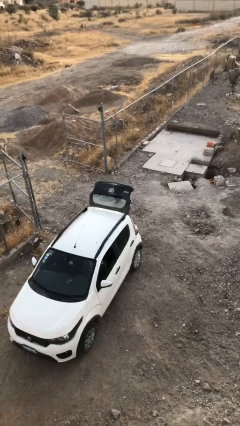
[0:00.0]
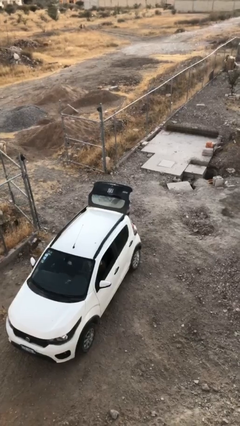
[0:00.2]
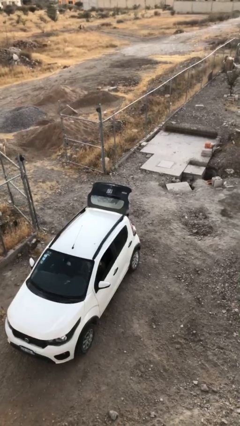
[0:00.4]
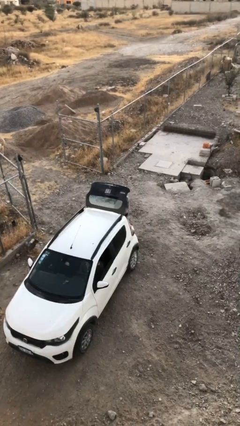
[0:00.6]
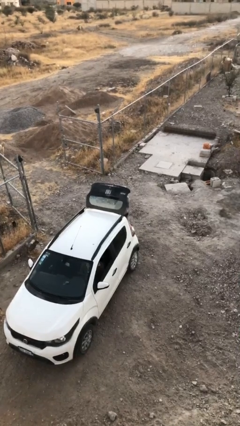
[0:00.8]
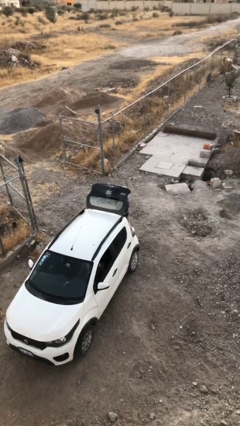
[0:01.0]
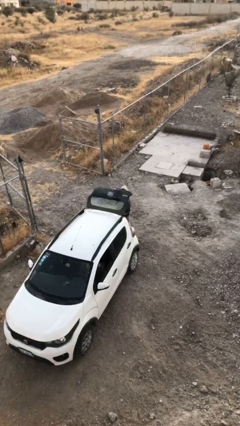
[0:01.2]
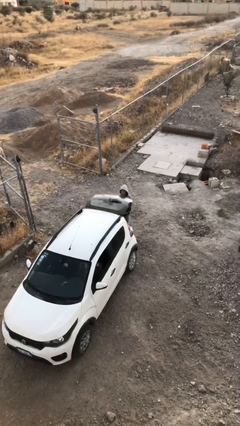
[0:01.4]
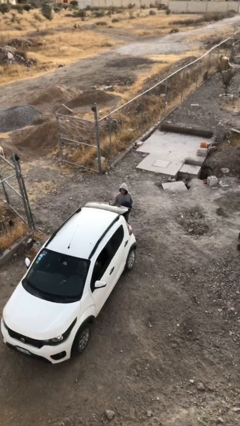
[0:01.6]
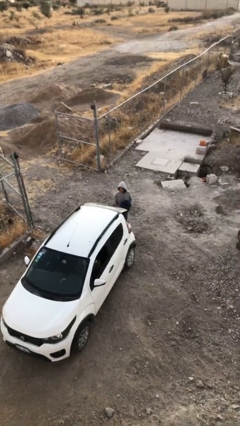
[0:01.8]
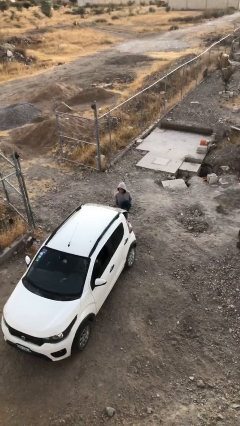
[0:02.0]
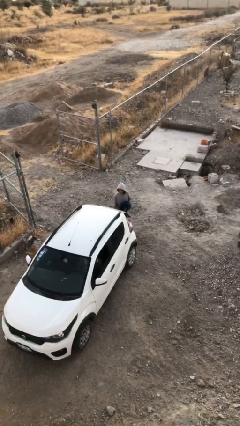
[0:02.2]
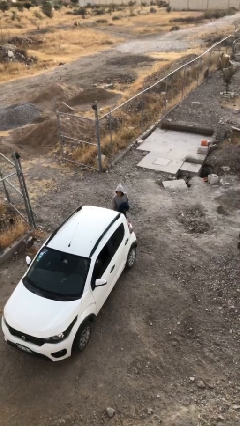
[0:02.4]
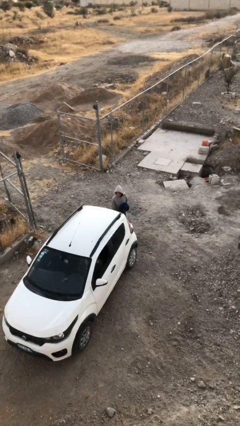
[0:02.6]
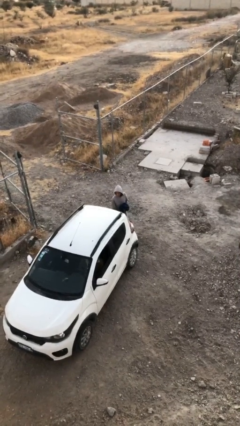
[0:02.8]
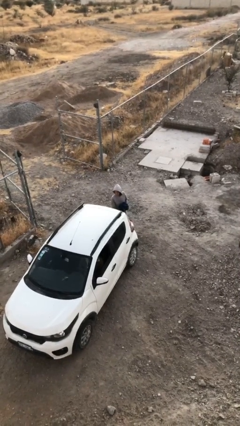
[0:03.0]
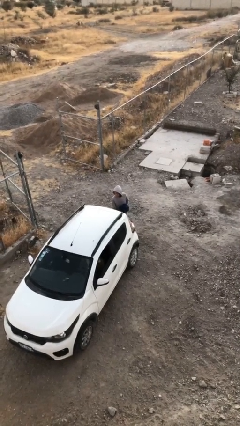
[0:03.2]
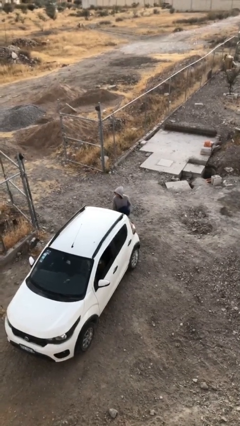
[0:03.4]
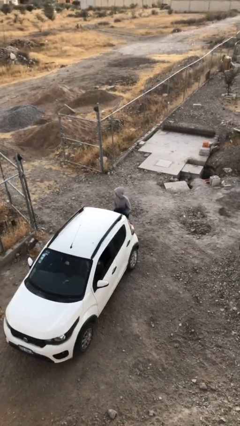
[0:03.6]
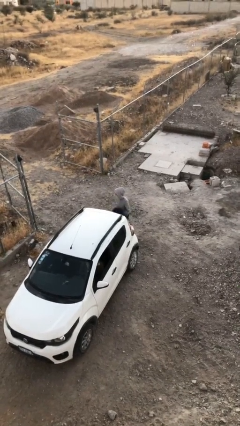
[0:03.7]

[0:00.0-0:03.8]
person closes car trunk

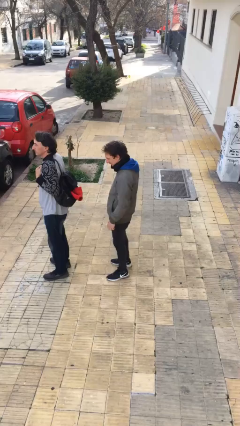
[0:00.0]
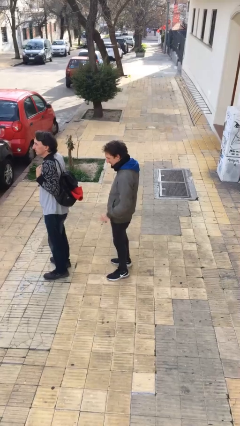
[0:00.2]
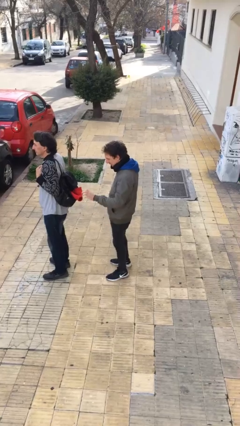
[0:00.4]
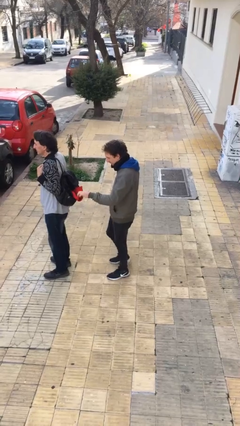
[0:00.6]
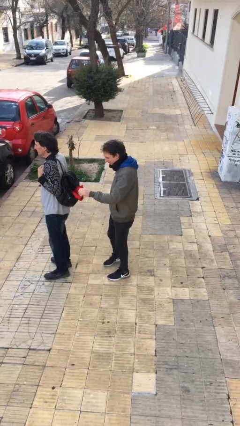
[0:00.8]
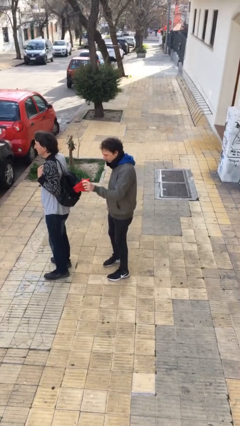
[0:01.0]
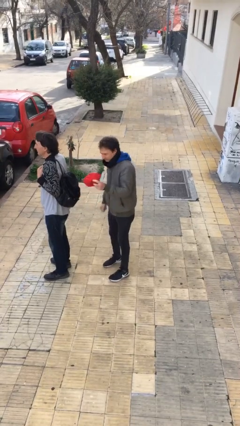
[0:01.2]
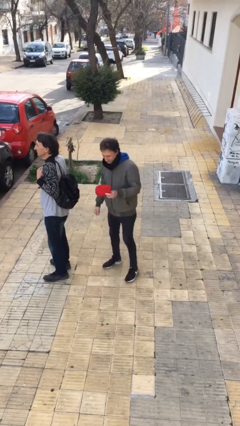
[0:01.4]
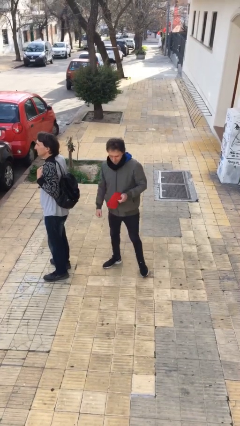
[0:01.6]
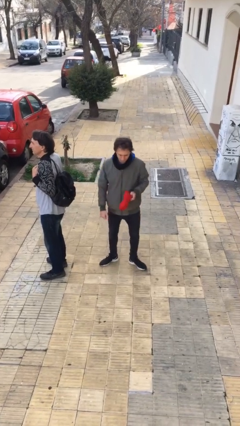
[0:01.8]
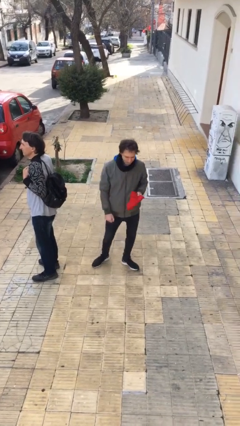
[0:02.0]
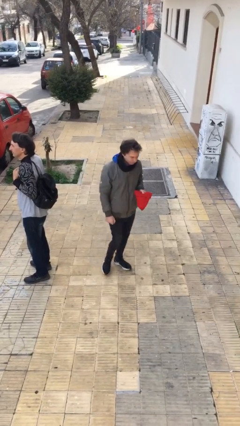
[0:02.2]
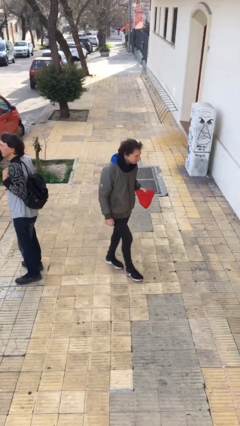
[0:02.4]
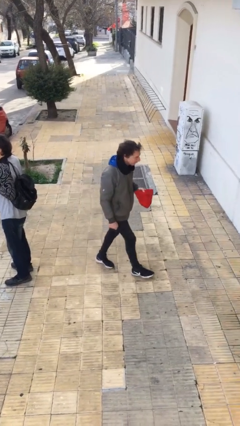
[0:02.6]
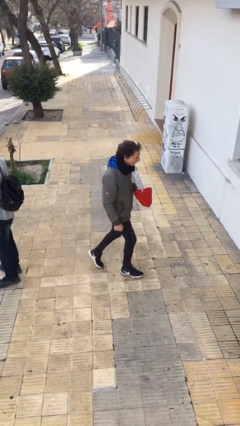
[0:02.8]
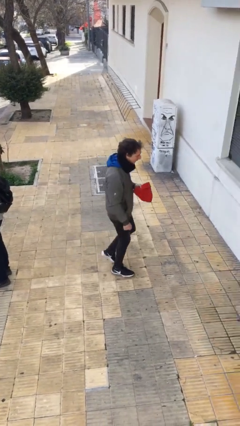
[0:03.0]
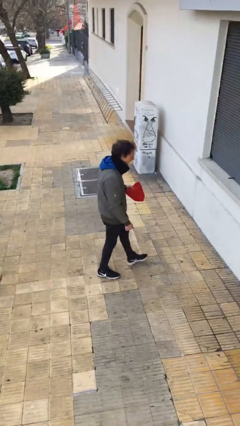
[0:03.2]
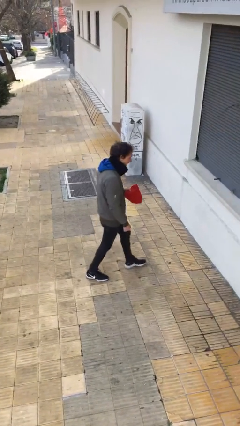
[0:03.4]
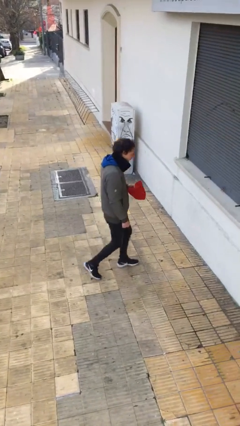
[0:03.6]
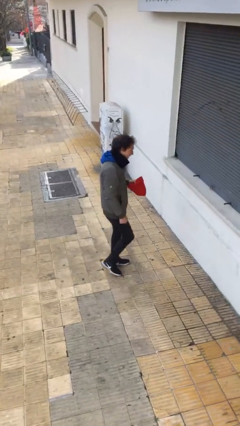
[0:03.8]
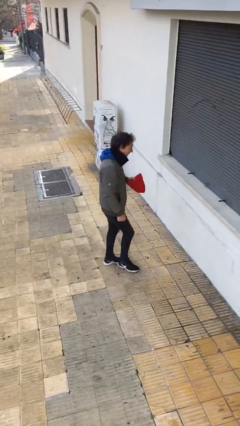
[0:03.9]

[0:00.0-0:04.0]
person steals object from person

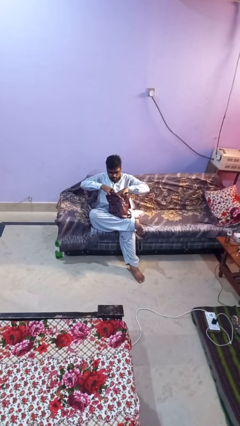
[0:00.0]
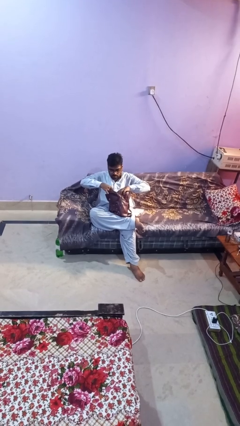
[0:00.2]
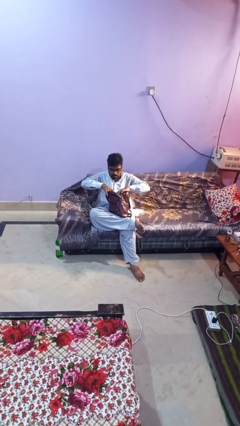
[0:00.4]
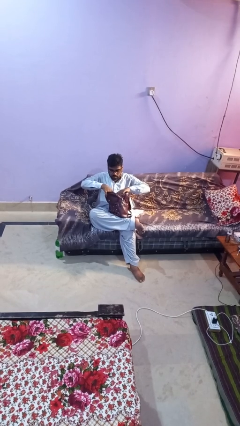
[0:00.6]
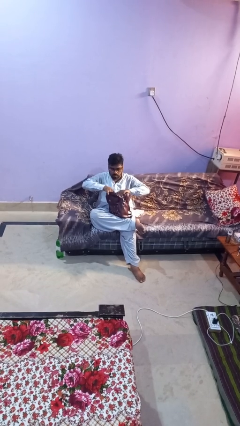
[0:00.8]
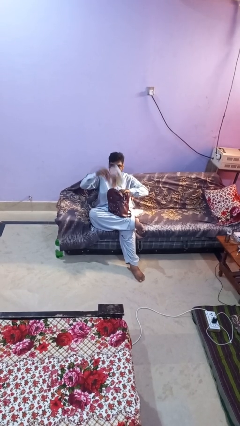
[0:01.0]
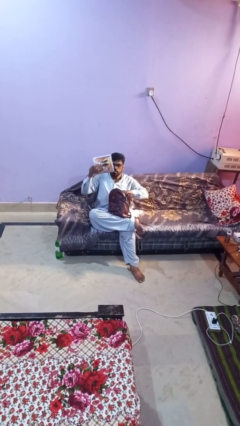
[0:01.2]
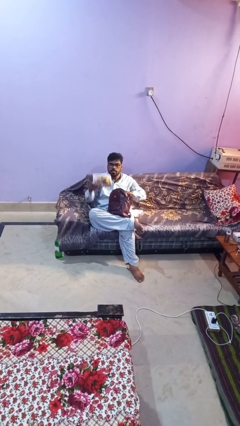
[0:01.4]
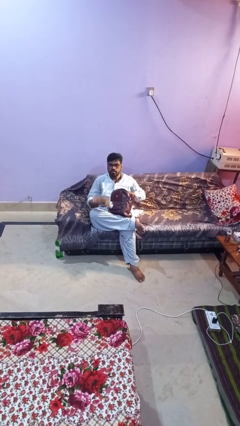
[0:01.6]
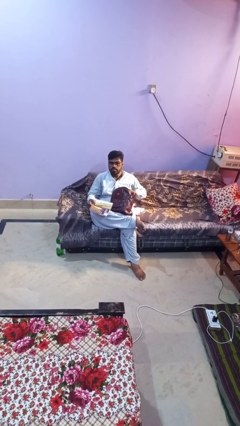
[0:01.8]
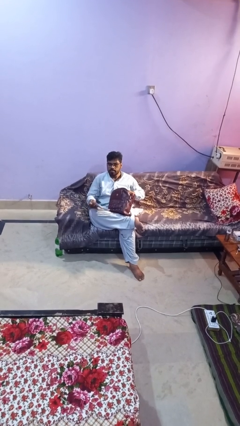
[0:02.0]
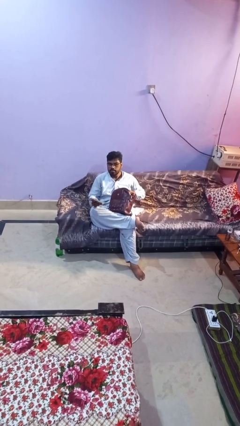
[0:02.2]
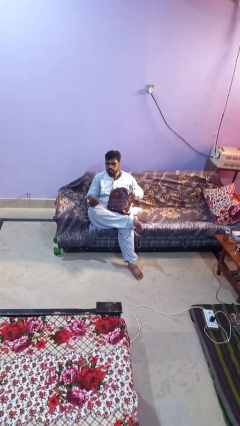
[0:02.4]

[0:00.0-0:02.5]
person takes object from backpack

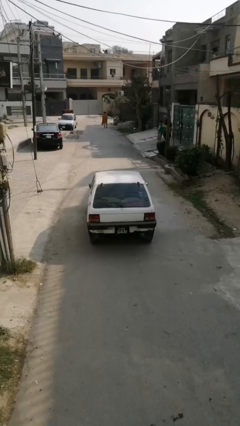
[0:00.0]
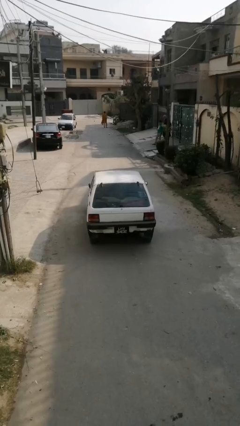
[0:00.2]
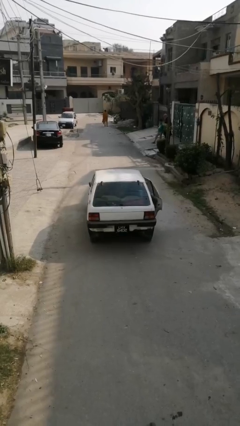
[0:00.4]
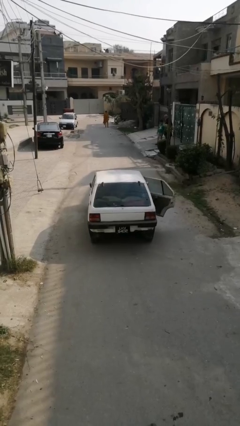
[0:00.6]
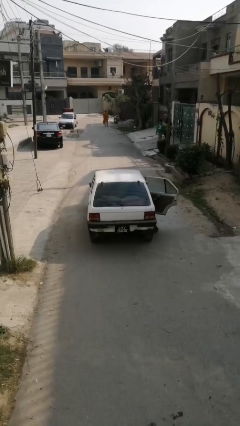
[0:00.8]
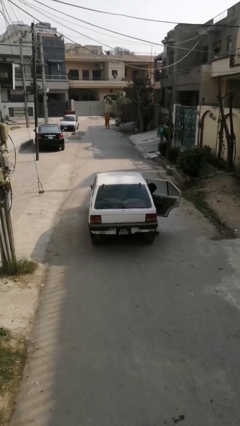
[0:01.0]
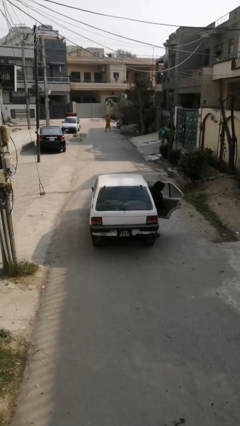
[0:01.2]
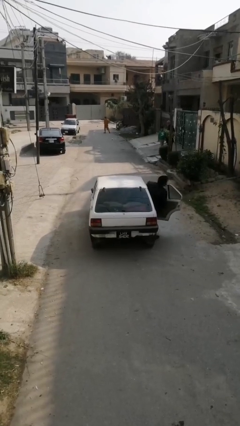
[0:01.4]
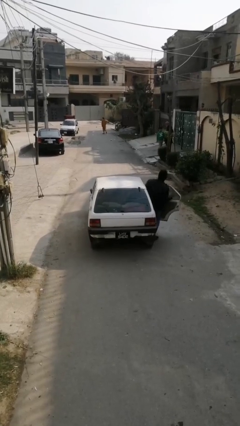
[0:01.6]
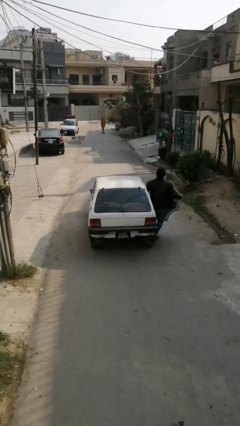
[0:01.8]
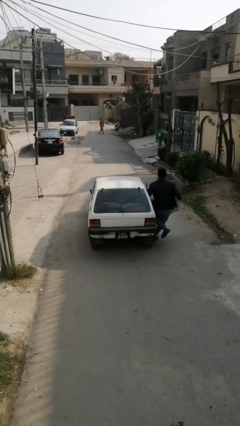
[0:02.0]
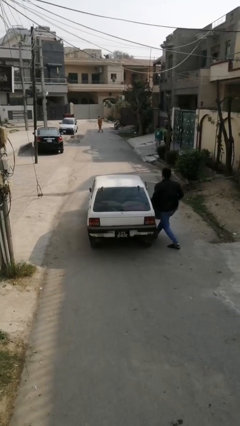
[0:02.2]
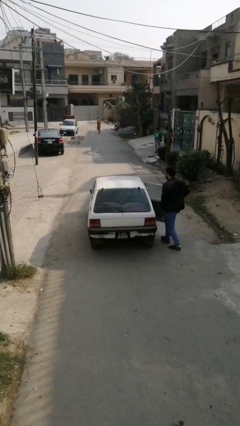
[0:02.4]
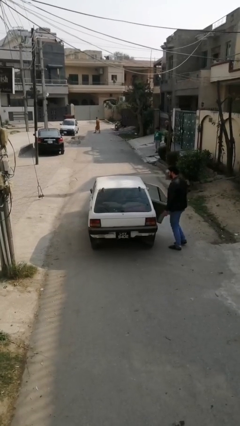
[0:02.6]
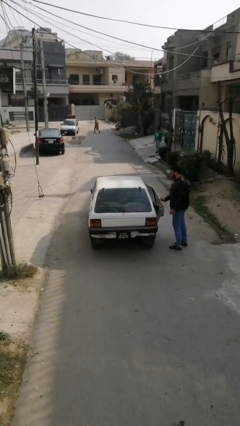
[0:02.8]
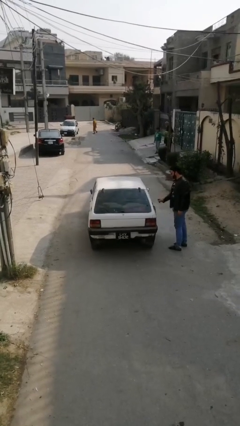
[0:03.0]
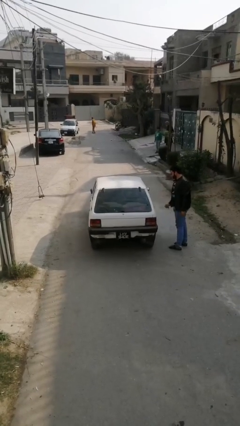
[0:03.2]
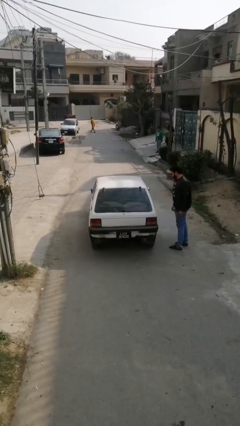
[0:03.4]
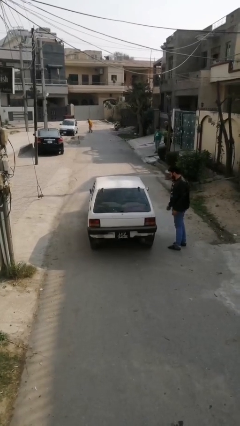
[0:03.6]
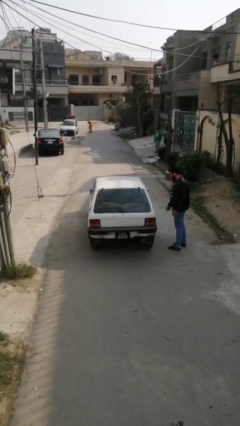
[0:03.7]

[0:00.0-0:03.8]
car drops off person

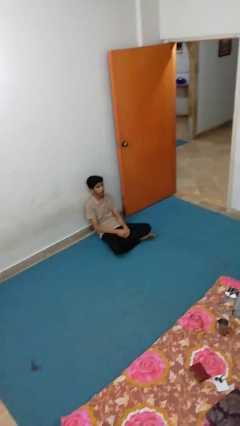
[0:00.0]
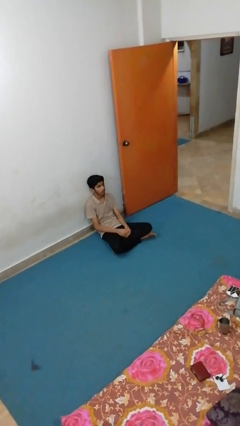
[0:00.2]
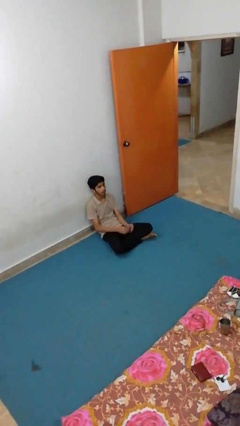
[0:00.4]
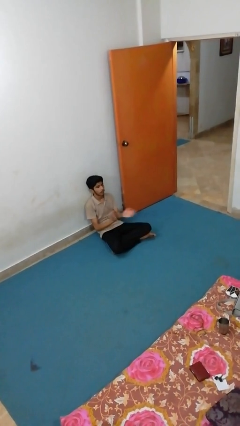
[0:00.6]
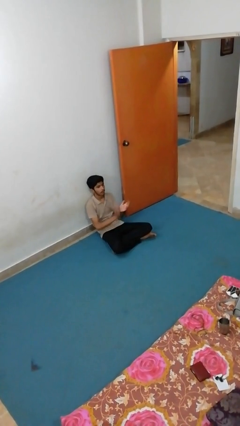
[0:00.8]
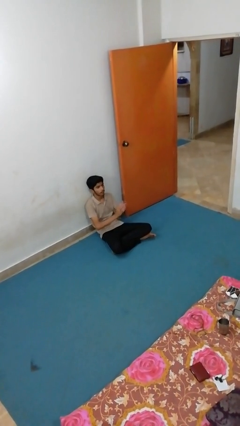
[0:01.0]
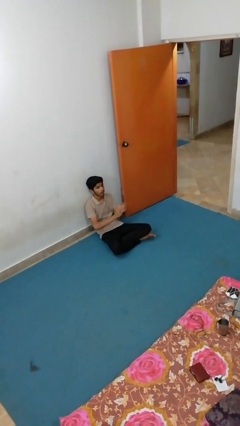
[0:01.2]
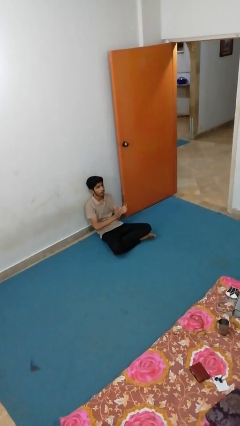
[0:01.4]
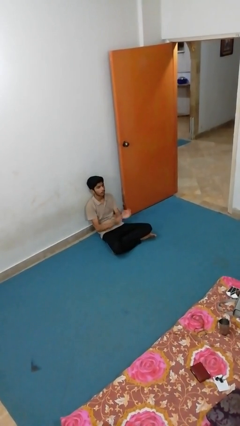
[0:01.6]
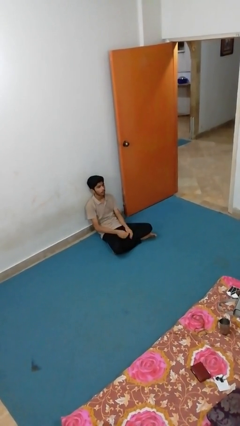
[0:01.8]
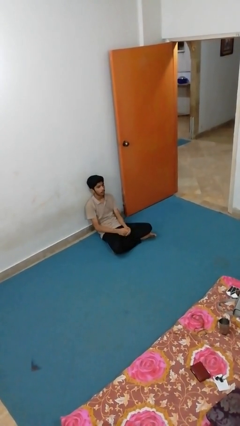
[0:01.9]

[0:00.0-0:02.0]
person claps hands

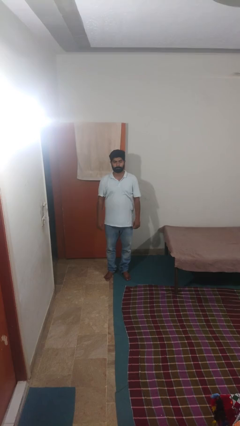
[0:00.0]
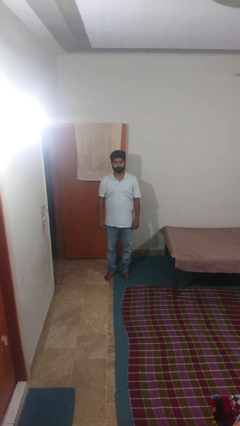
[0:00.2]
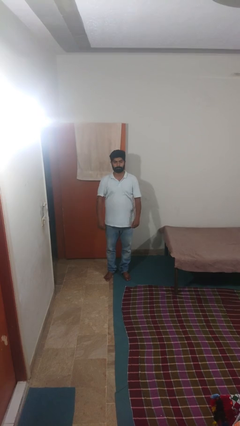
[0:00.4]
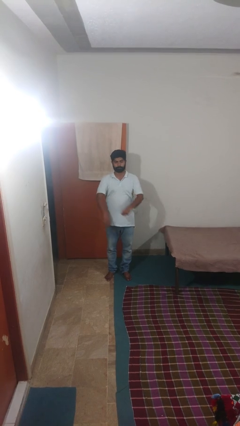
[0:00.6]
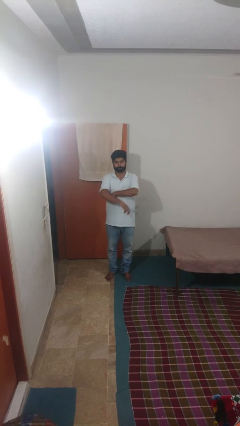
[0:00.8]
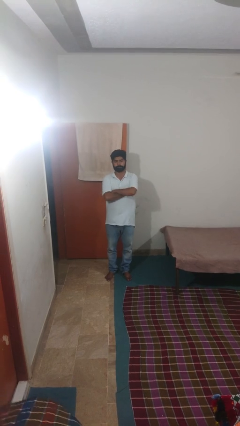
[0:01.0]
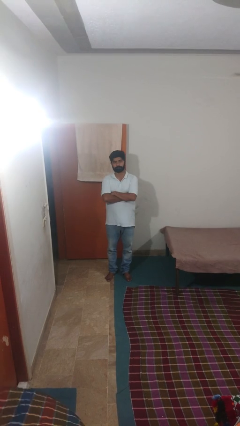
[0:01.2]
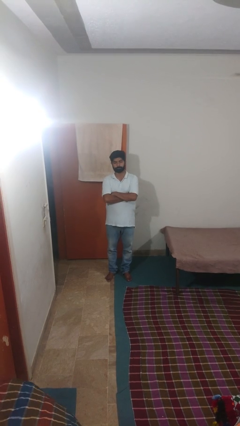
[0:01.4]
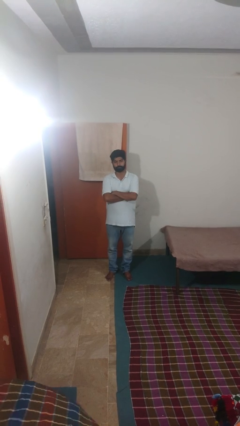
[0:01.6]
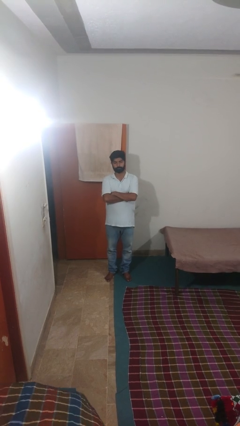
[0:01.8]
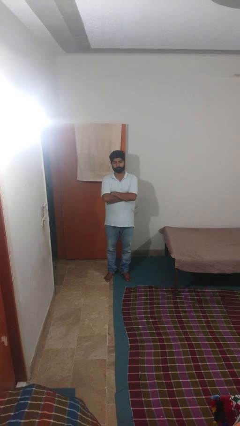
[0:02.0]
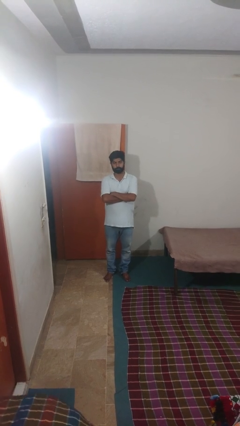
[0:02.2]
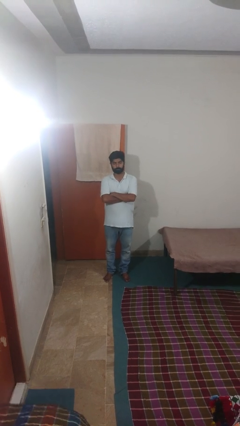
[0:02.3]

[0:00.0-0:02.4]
person crosses arms
